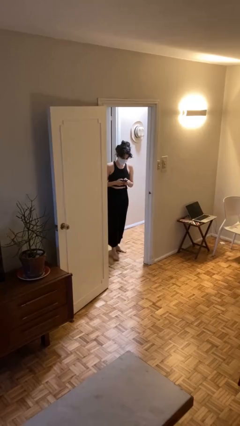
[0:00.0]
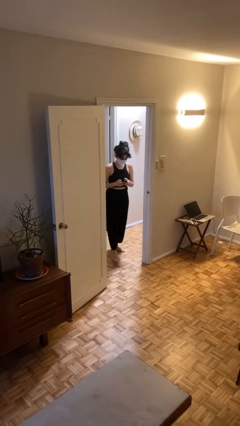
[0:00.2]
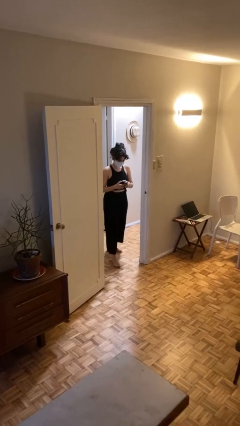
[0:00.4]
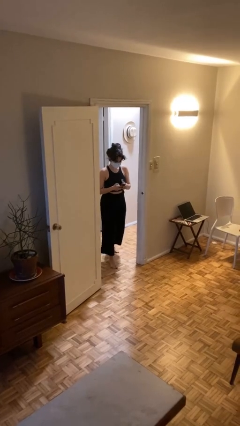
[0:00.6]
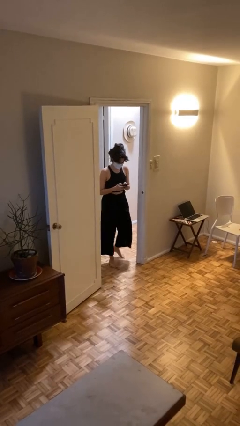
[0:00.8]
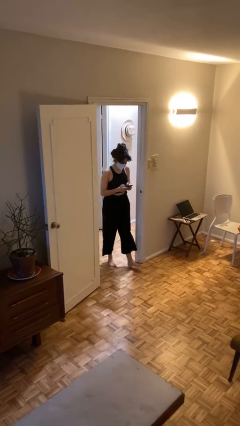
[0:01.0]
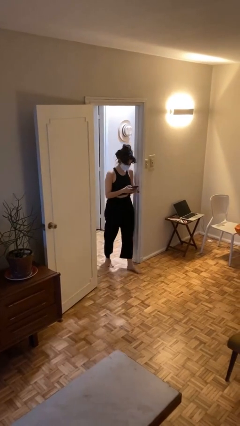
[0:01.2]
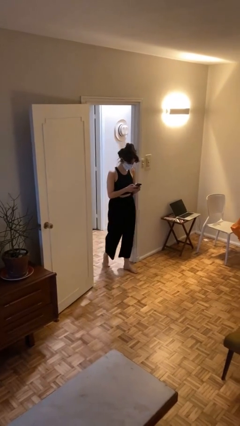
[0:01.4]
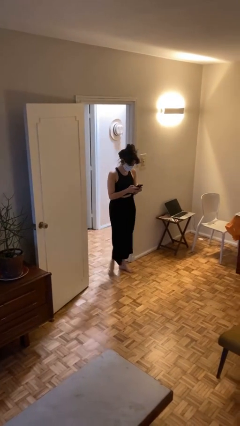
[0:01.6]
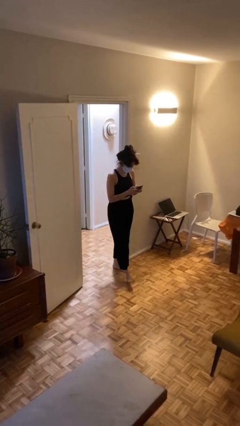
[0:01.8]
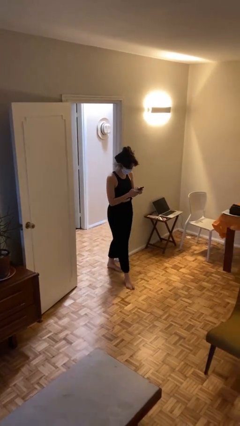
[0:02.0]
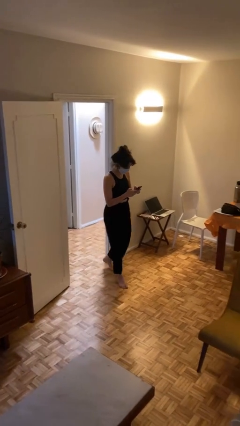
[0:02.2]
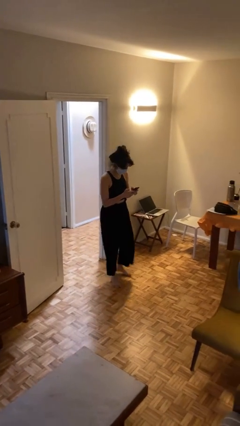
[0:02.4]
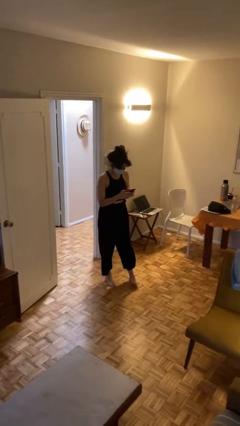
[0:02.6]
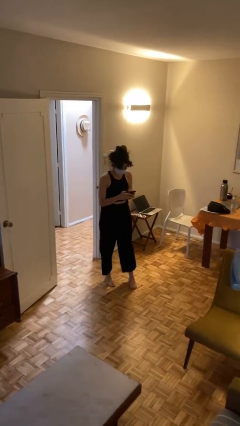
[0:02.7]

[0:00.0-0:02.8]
person enters scene through structure

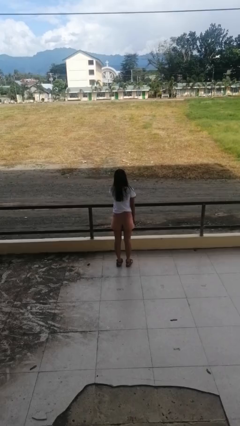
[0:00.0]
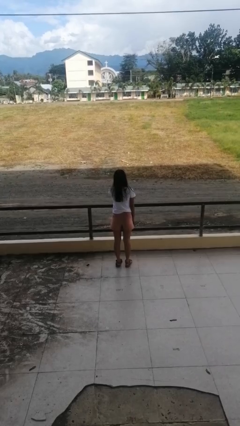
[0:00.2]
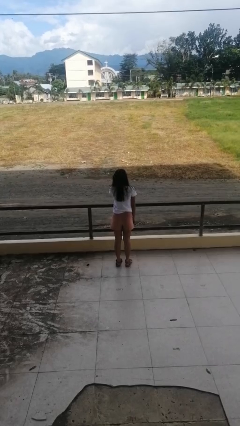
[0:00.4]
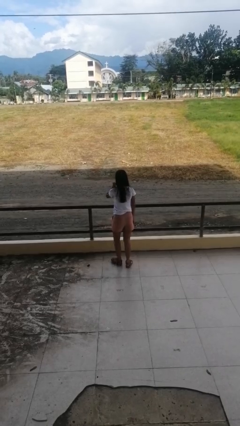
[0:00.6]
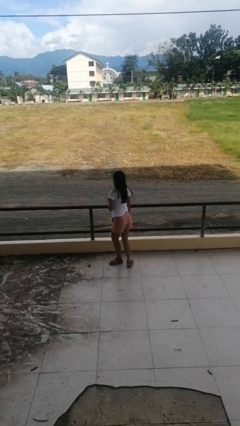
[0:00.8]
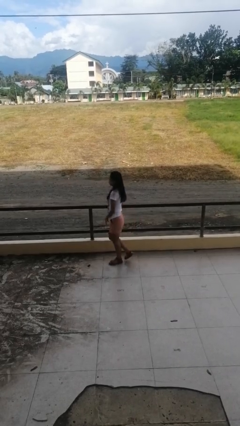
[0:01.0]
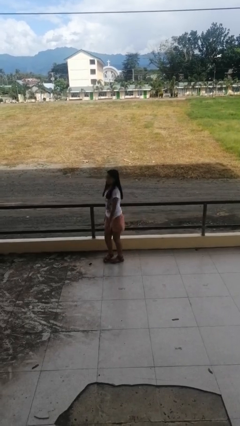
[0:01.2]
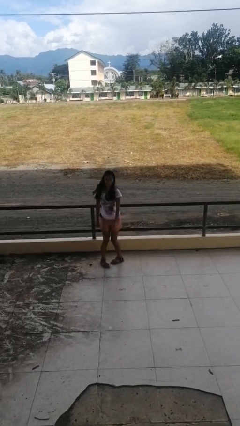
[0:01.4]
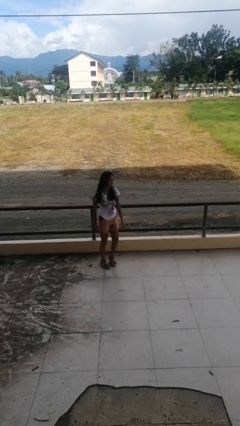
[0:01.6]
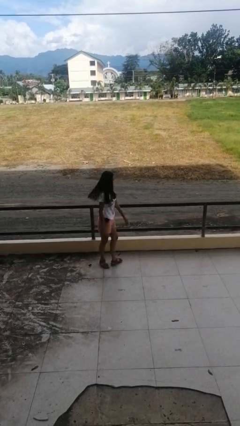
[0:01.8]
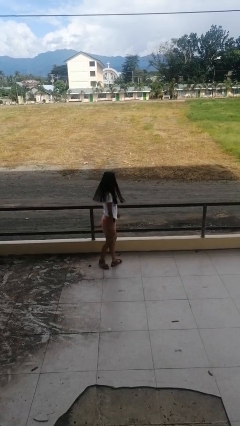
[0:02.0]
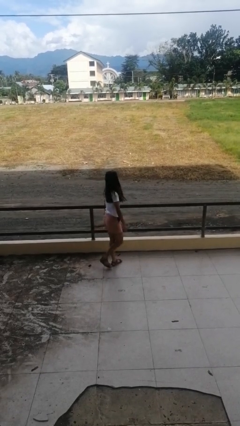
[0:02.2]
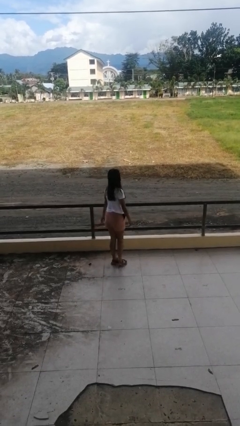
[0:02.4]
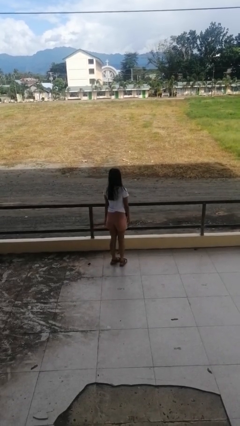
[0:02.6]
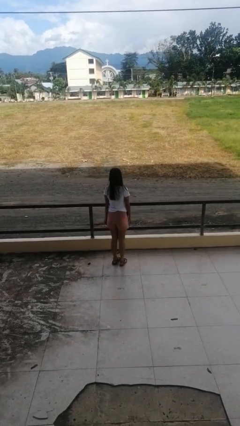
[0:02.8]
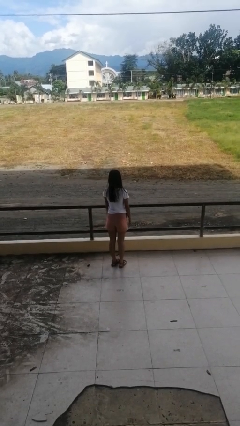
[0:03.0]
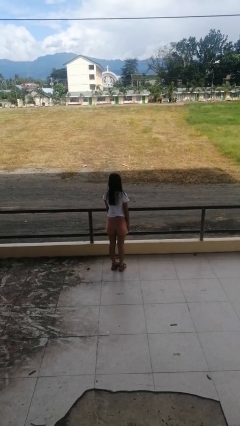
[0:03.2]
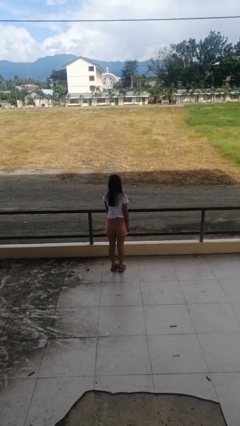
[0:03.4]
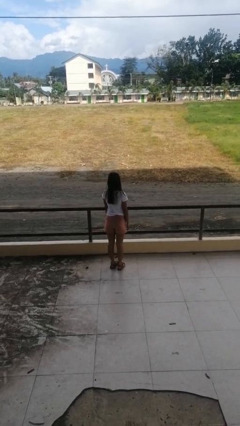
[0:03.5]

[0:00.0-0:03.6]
person twirls

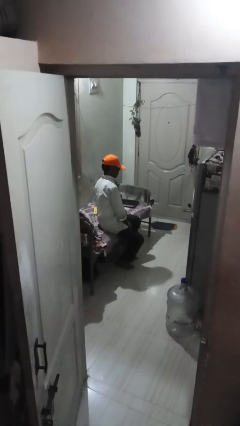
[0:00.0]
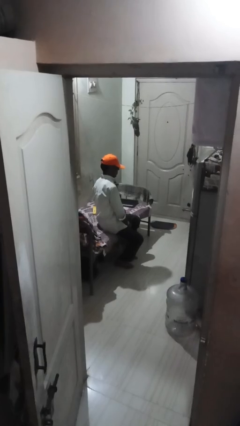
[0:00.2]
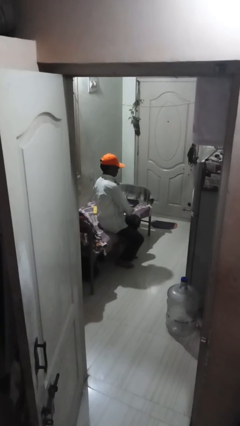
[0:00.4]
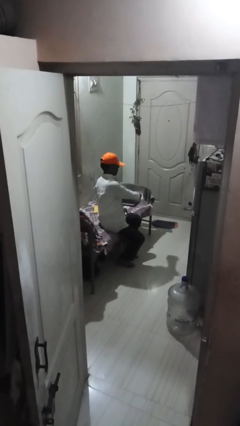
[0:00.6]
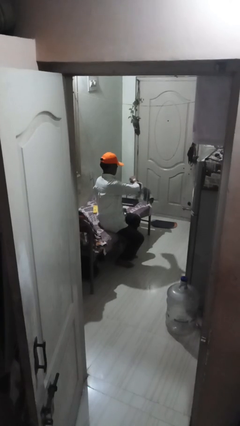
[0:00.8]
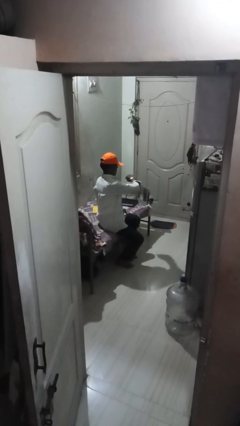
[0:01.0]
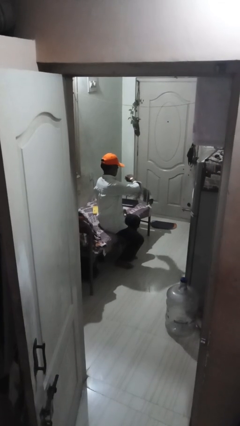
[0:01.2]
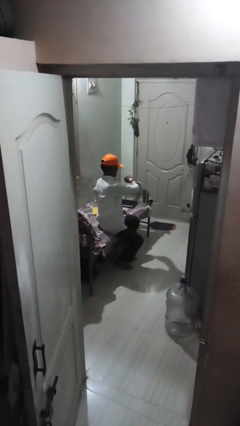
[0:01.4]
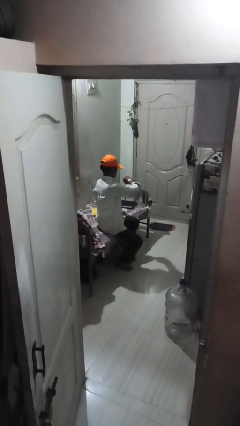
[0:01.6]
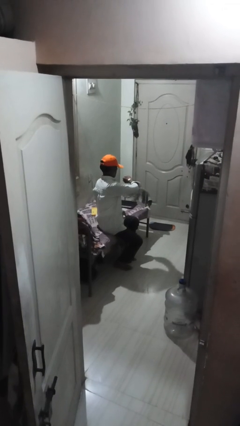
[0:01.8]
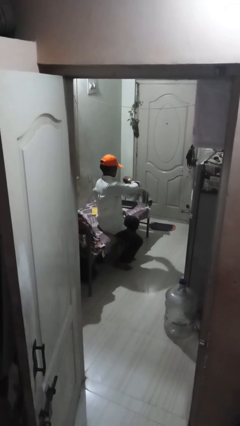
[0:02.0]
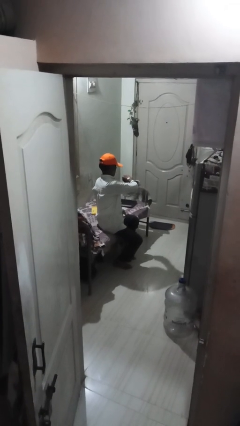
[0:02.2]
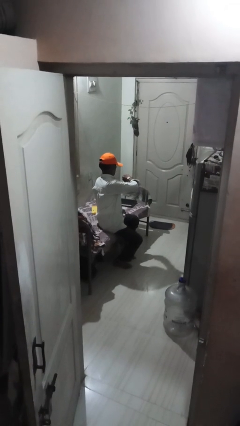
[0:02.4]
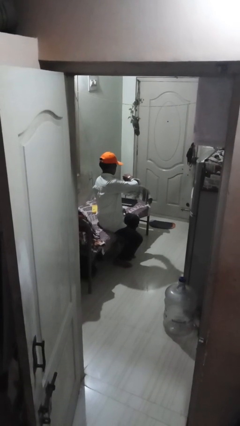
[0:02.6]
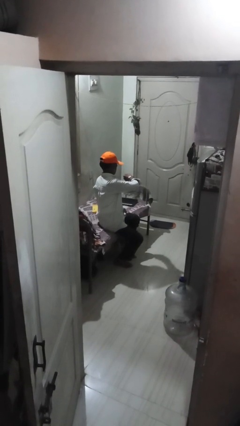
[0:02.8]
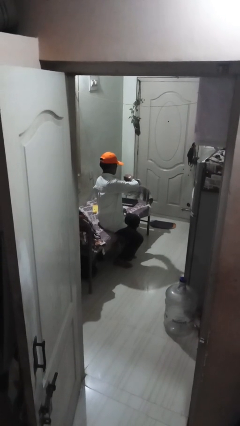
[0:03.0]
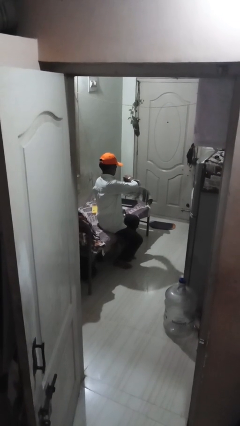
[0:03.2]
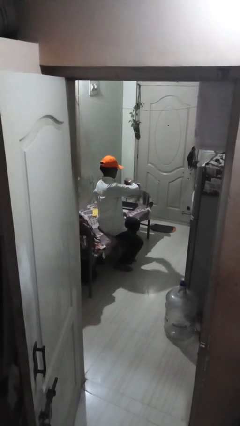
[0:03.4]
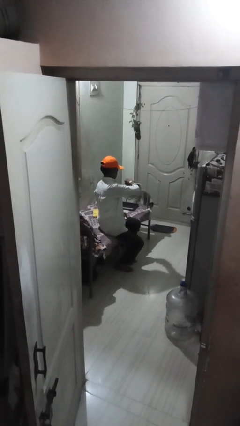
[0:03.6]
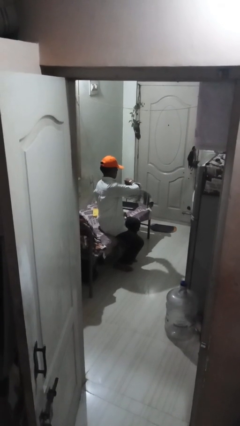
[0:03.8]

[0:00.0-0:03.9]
person looks at wristwatch

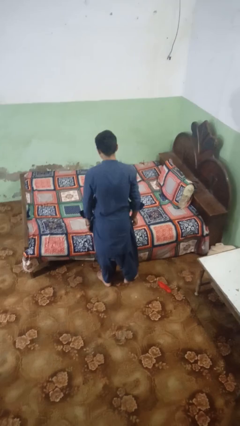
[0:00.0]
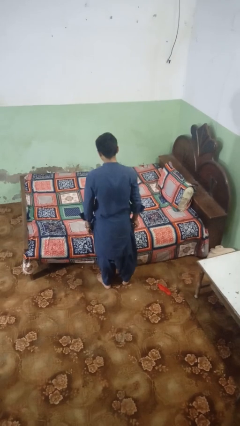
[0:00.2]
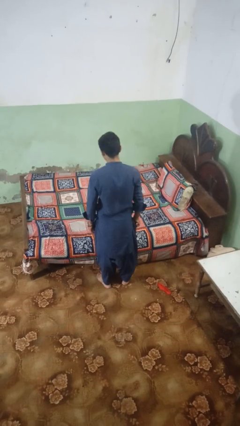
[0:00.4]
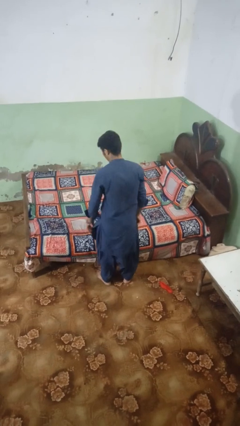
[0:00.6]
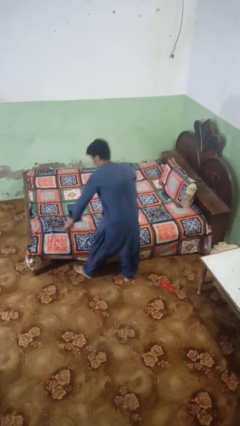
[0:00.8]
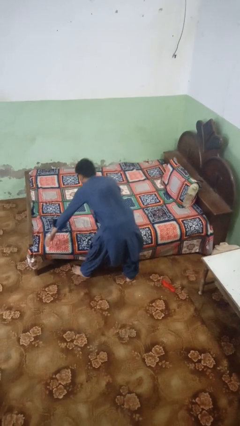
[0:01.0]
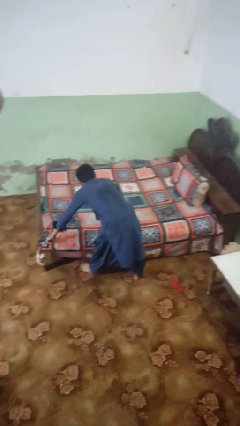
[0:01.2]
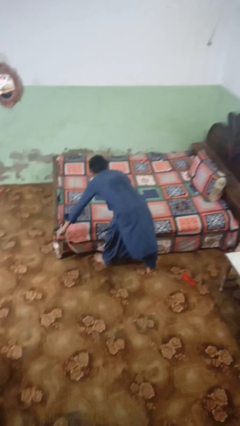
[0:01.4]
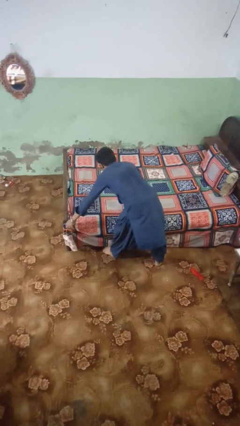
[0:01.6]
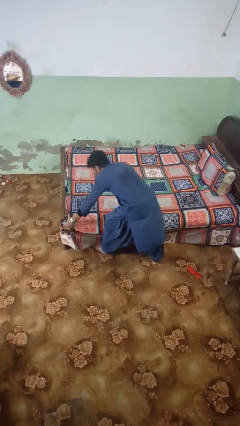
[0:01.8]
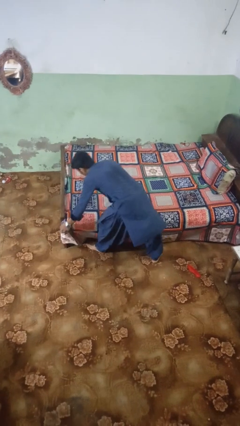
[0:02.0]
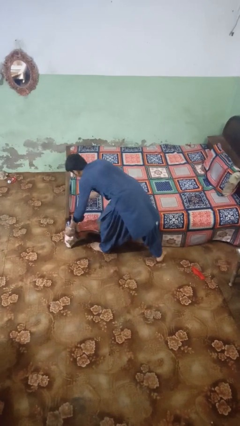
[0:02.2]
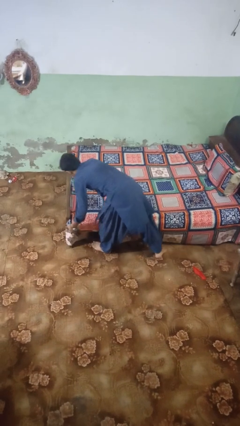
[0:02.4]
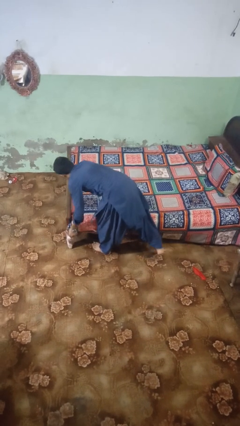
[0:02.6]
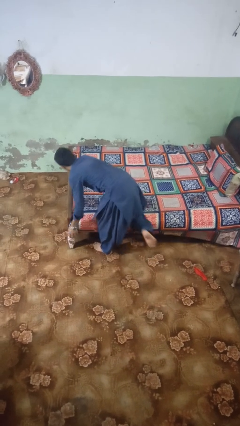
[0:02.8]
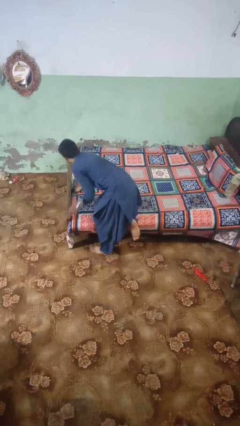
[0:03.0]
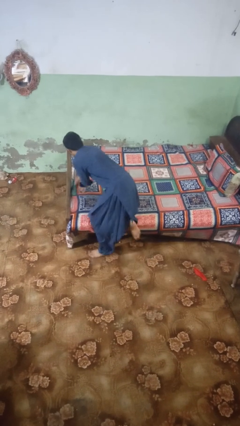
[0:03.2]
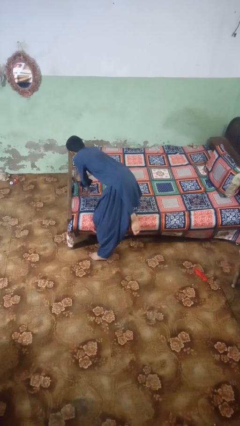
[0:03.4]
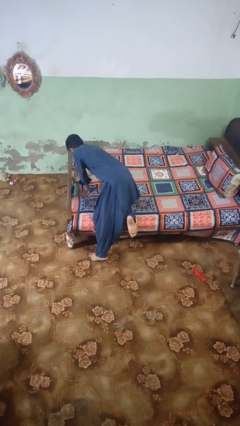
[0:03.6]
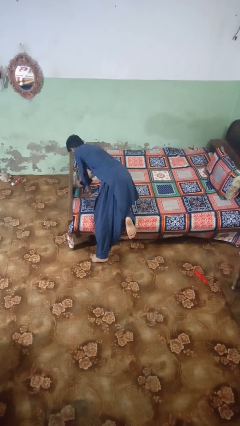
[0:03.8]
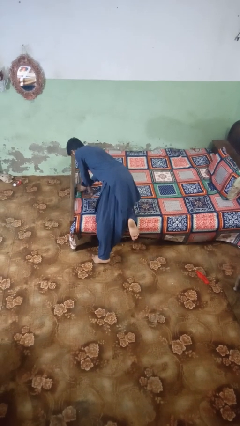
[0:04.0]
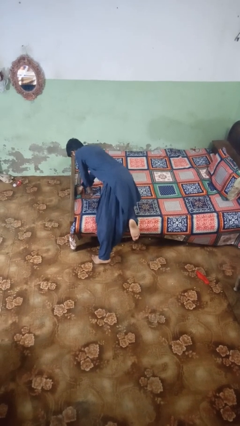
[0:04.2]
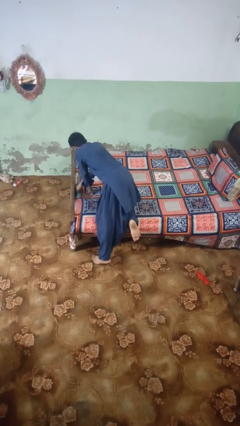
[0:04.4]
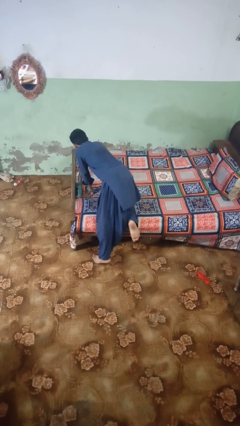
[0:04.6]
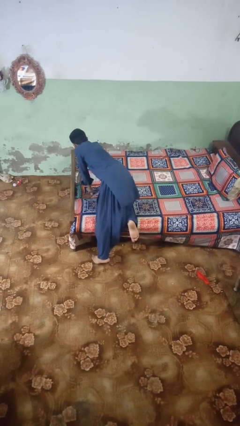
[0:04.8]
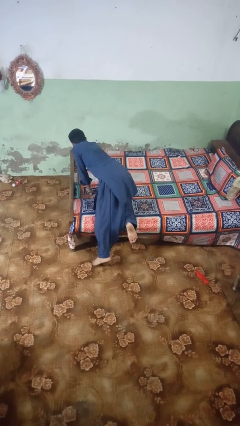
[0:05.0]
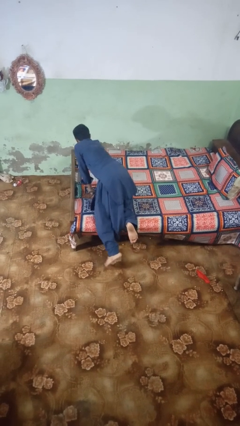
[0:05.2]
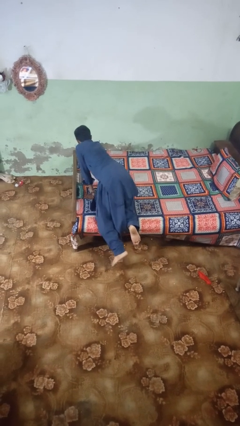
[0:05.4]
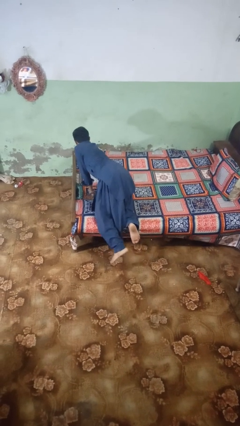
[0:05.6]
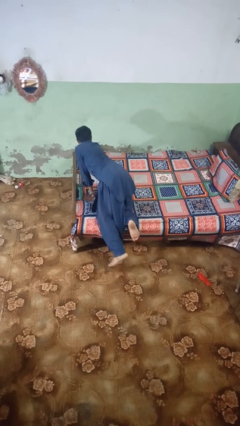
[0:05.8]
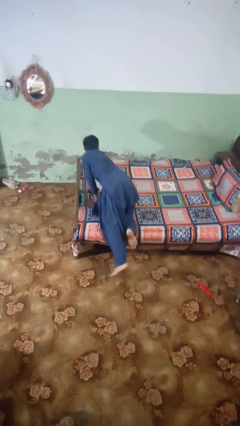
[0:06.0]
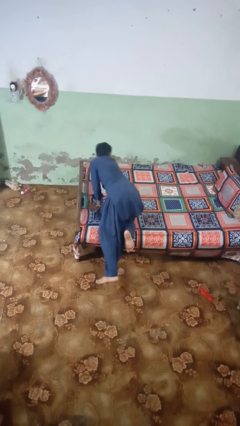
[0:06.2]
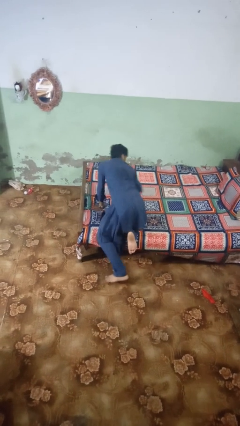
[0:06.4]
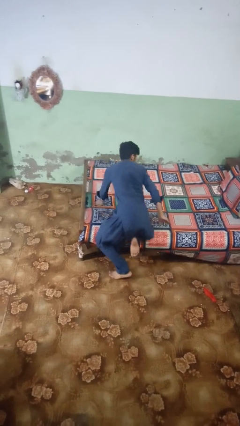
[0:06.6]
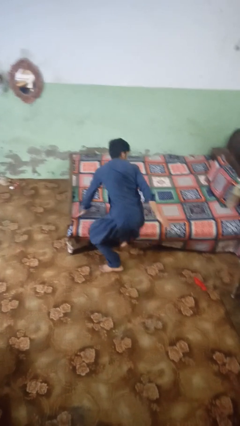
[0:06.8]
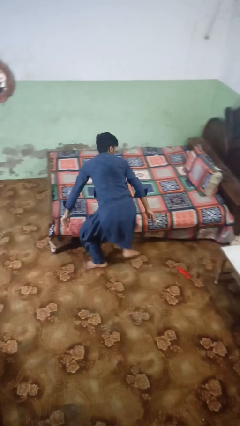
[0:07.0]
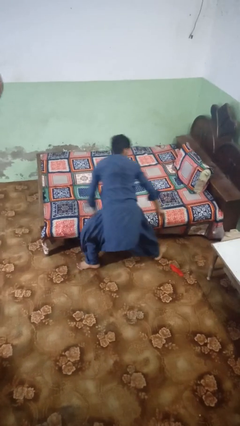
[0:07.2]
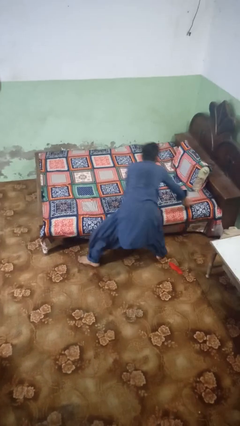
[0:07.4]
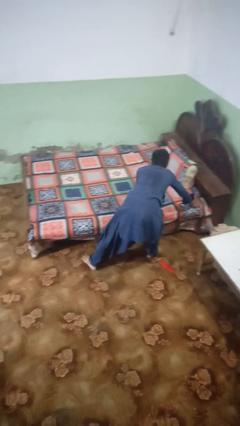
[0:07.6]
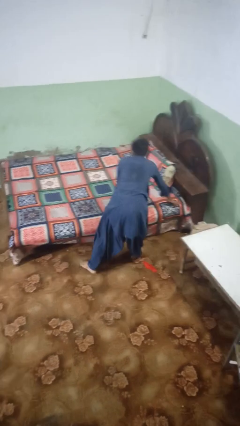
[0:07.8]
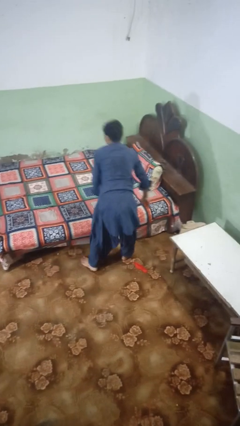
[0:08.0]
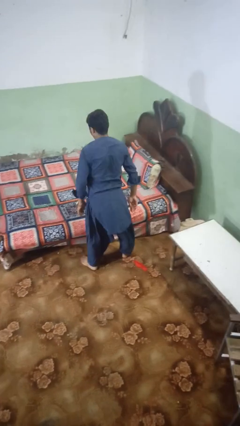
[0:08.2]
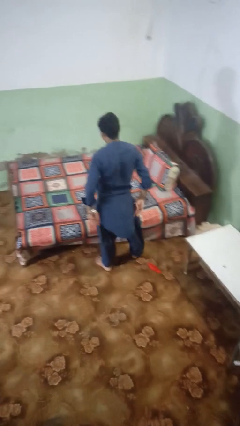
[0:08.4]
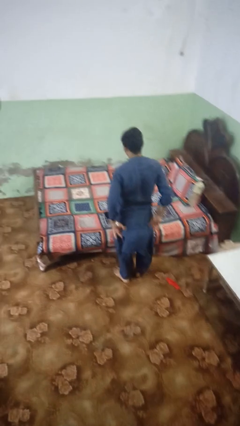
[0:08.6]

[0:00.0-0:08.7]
person makes bed
